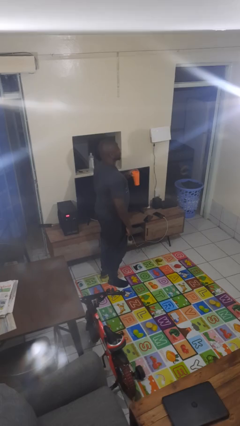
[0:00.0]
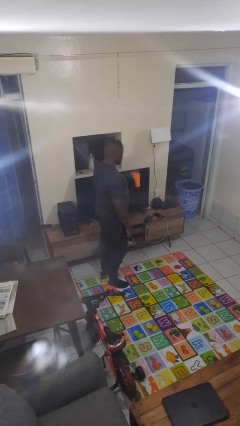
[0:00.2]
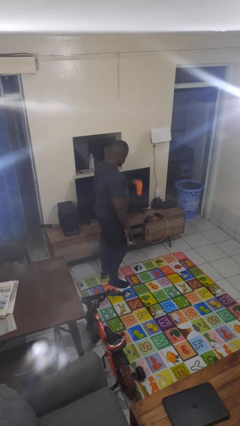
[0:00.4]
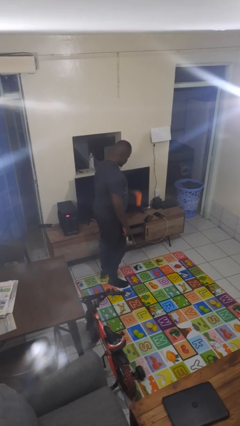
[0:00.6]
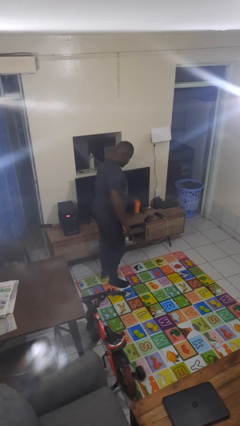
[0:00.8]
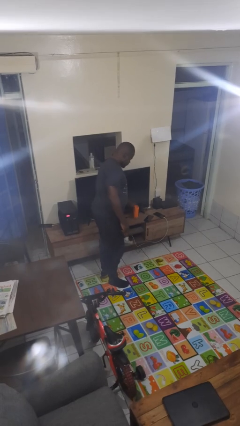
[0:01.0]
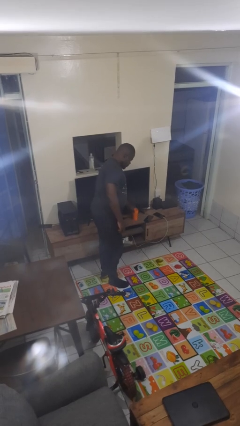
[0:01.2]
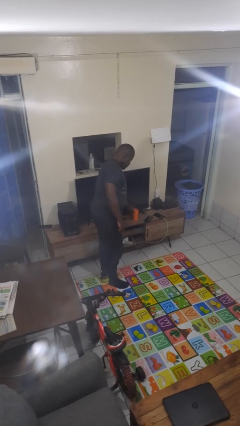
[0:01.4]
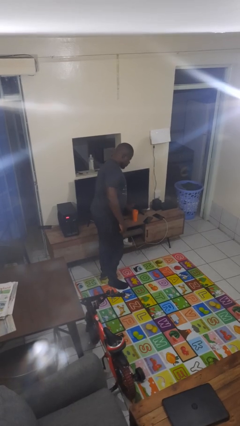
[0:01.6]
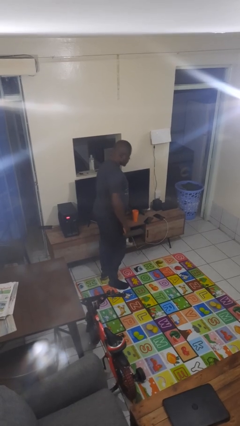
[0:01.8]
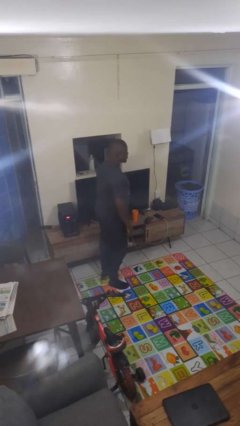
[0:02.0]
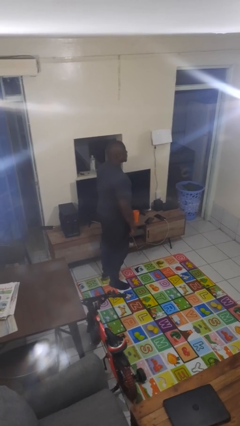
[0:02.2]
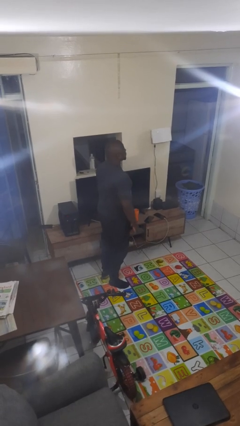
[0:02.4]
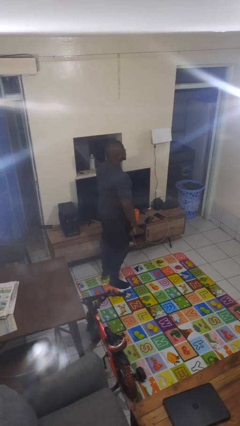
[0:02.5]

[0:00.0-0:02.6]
person puts down object on countertop

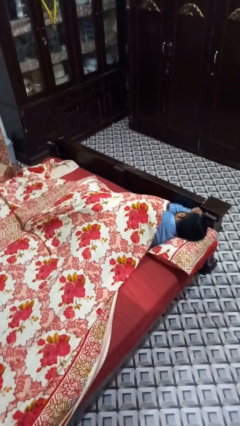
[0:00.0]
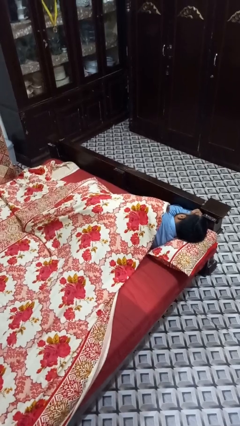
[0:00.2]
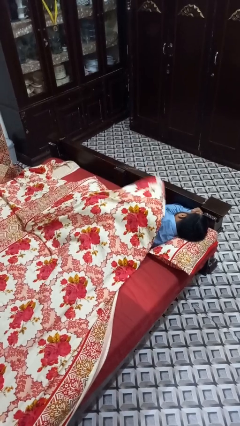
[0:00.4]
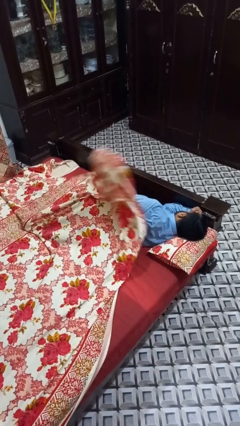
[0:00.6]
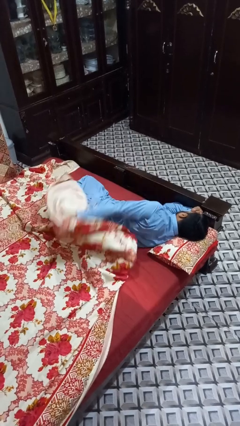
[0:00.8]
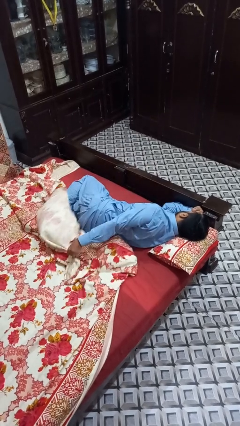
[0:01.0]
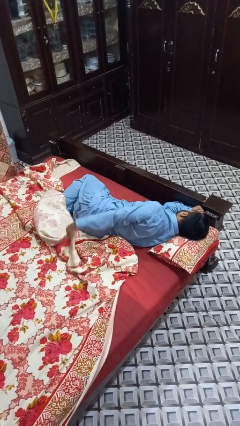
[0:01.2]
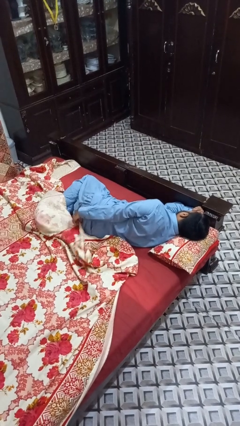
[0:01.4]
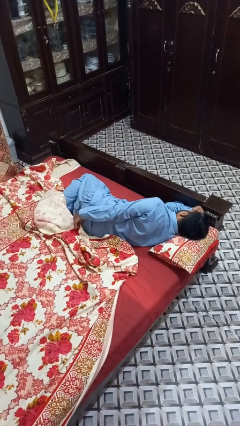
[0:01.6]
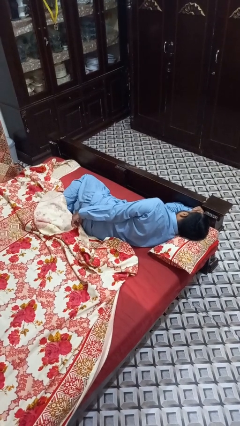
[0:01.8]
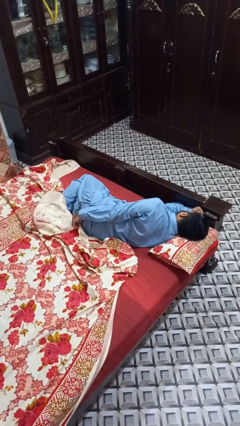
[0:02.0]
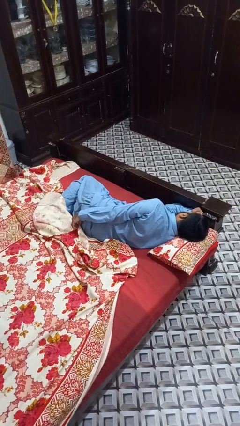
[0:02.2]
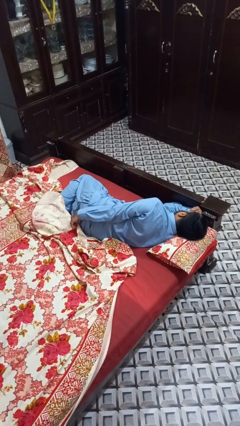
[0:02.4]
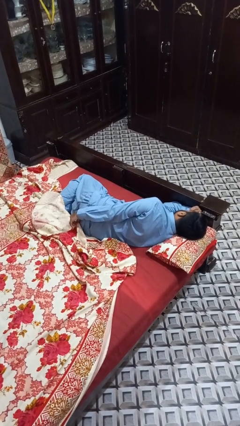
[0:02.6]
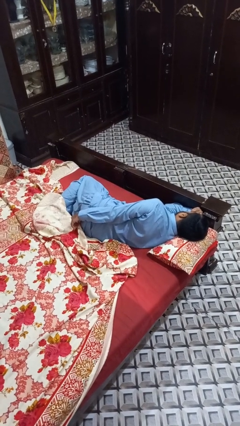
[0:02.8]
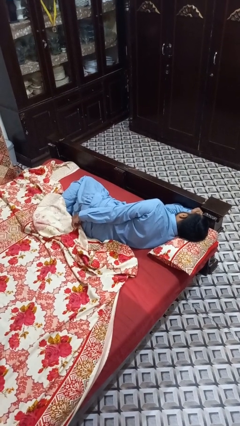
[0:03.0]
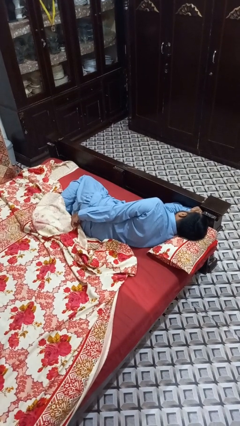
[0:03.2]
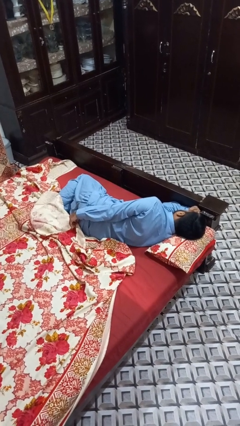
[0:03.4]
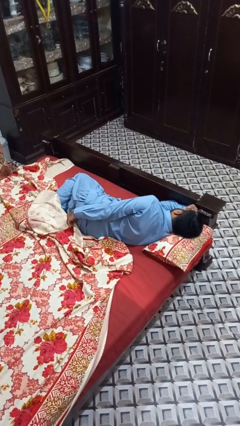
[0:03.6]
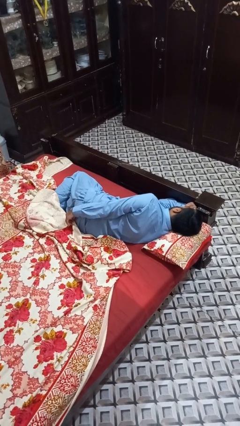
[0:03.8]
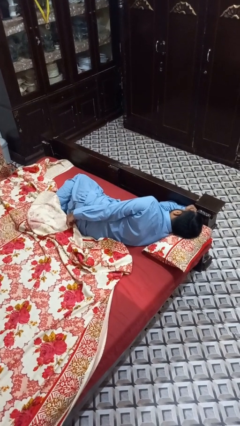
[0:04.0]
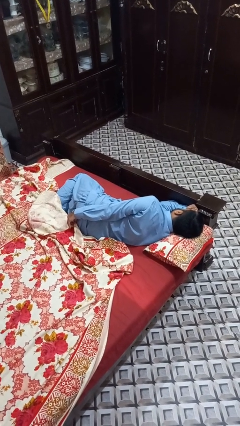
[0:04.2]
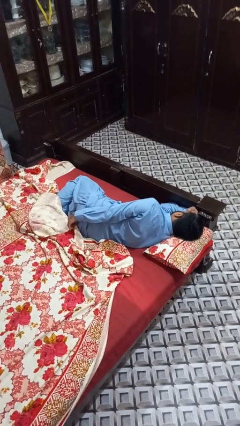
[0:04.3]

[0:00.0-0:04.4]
person uncovers with bedsheets

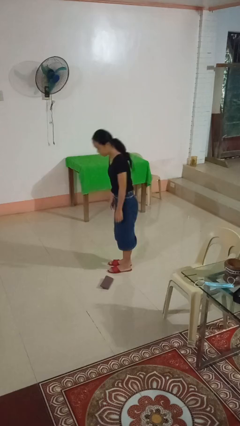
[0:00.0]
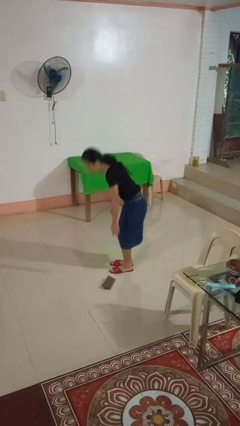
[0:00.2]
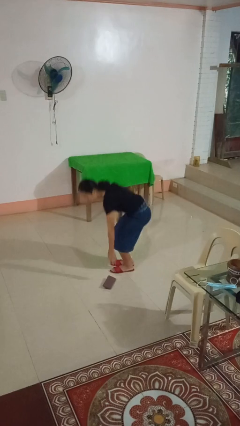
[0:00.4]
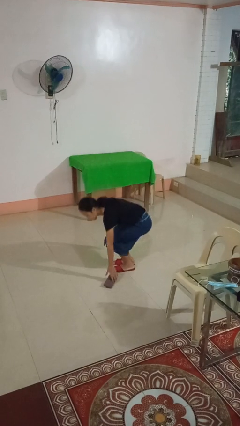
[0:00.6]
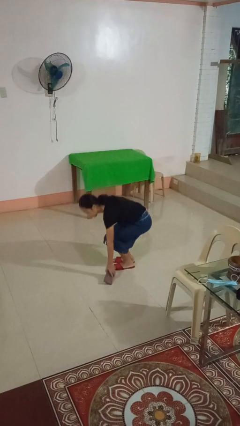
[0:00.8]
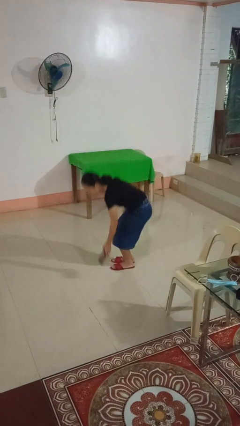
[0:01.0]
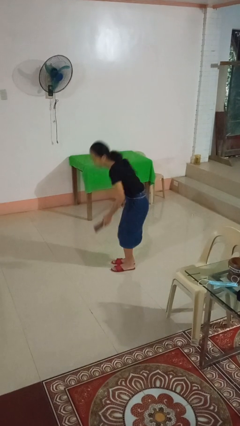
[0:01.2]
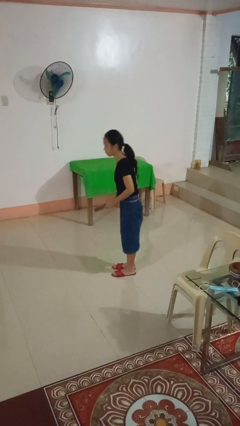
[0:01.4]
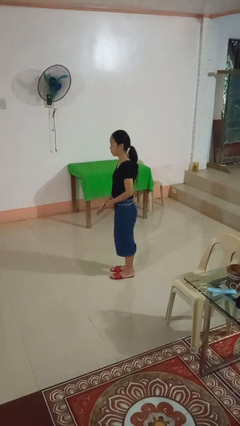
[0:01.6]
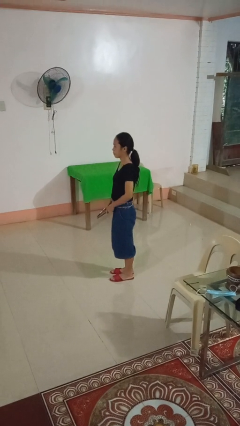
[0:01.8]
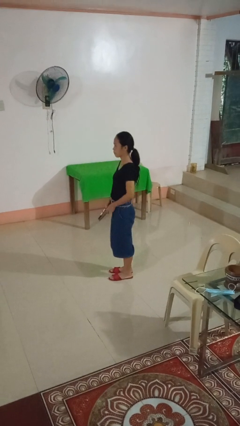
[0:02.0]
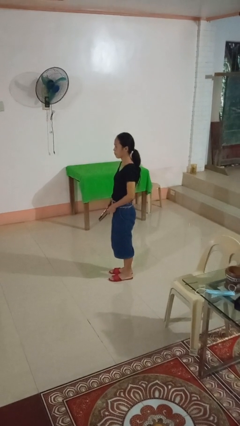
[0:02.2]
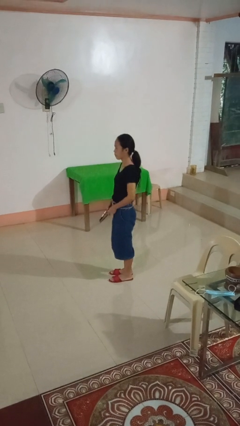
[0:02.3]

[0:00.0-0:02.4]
person picks up object from floor

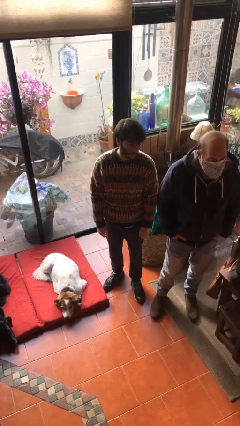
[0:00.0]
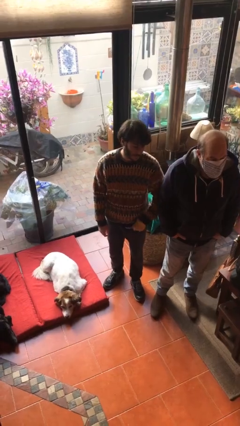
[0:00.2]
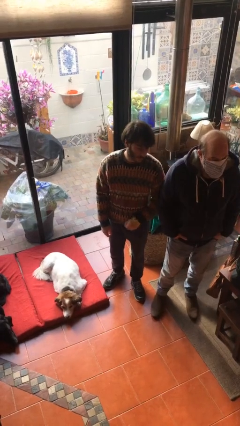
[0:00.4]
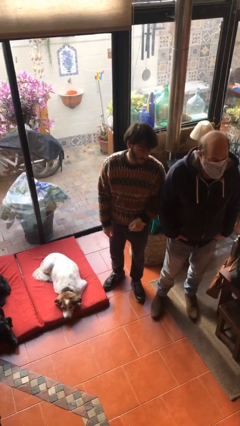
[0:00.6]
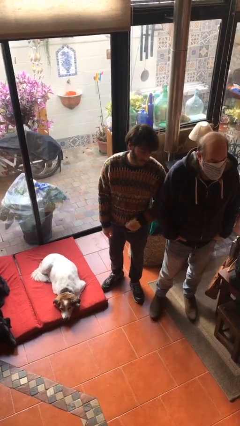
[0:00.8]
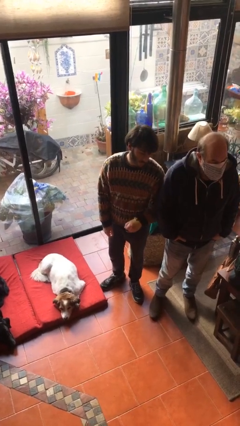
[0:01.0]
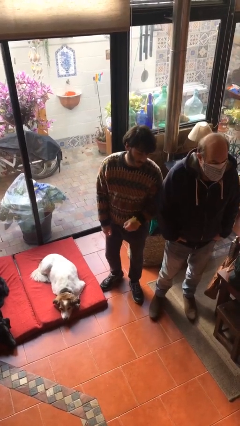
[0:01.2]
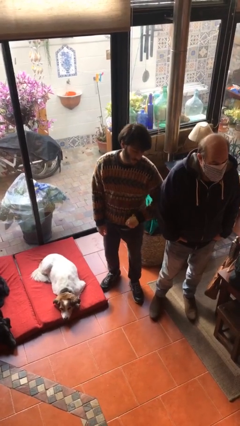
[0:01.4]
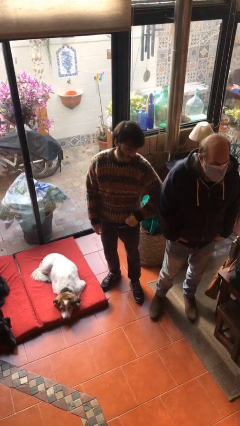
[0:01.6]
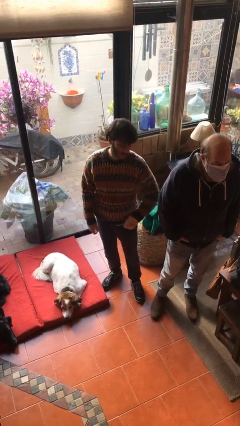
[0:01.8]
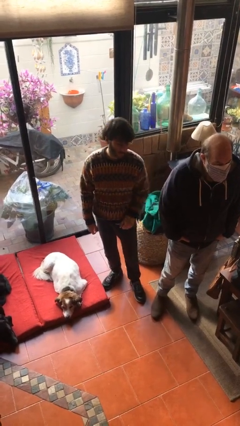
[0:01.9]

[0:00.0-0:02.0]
person nudges person with elbow

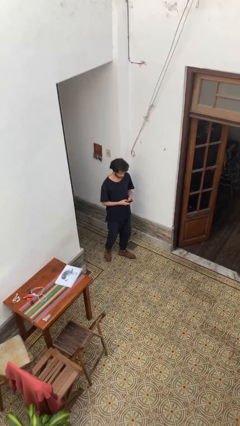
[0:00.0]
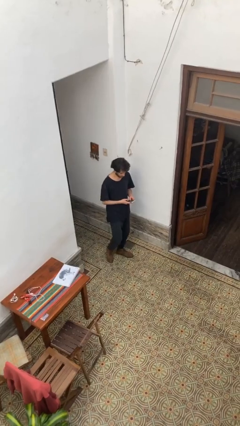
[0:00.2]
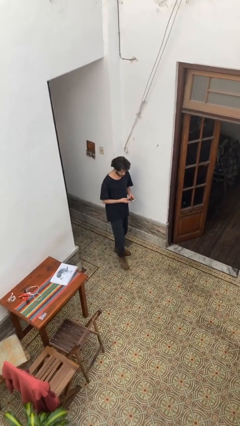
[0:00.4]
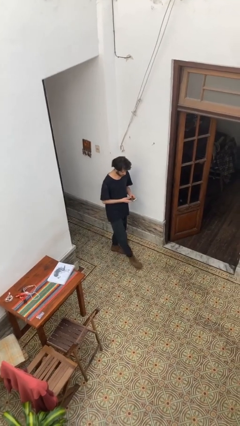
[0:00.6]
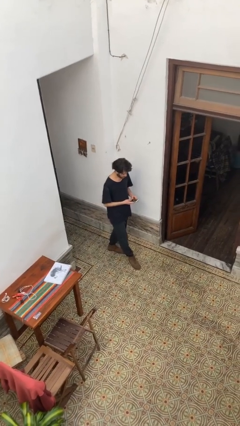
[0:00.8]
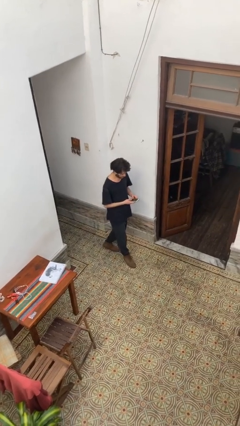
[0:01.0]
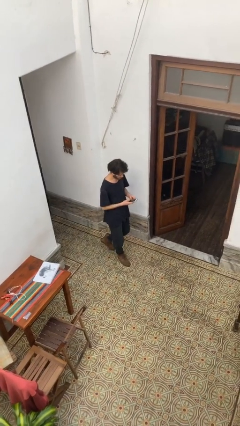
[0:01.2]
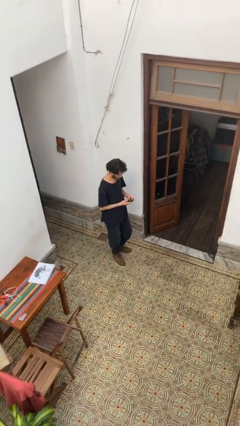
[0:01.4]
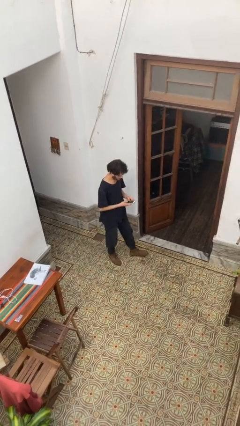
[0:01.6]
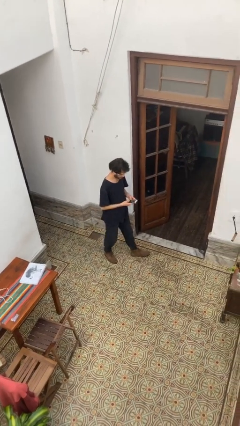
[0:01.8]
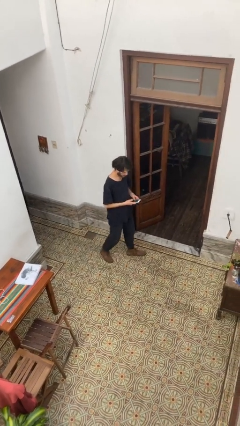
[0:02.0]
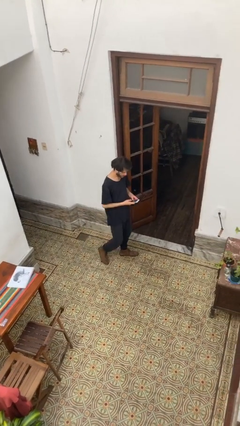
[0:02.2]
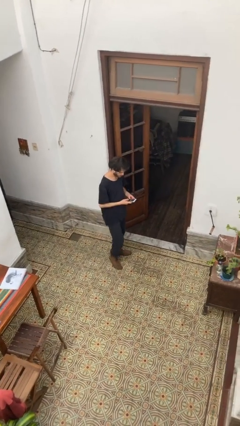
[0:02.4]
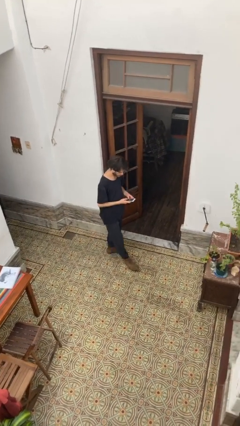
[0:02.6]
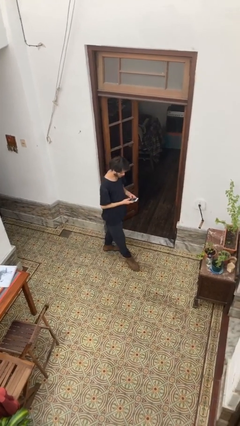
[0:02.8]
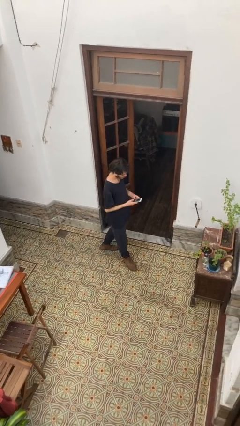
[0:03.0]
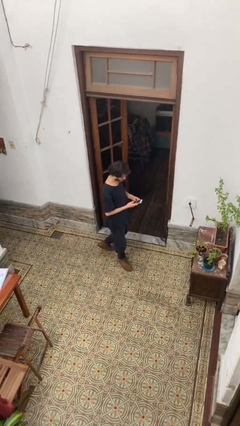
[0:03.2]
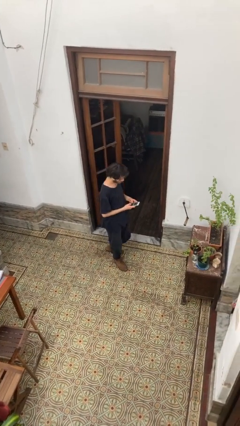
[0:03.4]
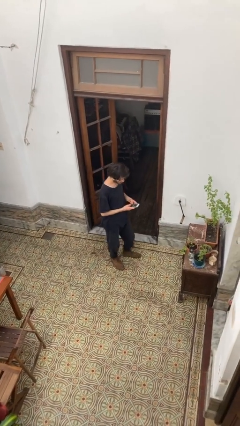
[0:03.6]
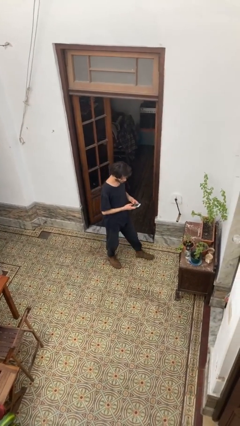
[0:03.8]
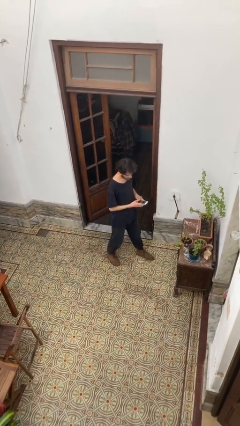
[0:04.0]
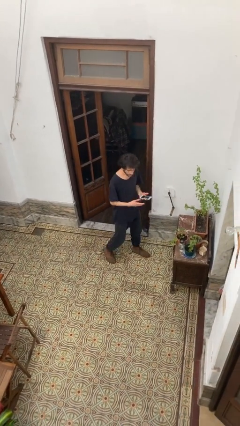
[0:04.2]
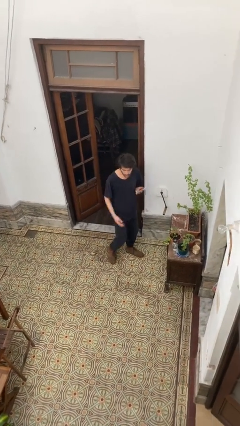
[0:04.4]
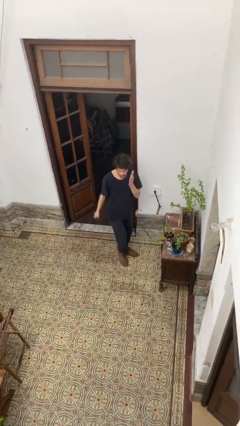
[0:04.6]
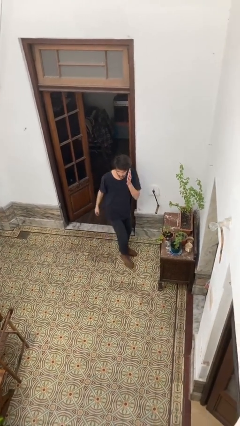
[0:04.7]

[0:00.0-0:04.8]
person texts on phone

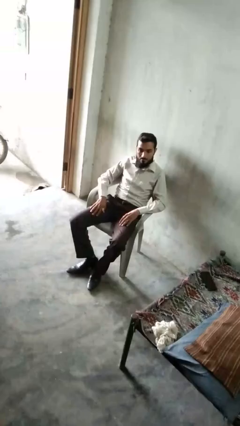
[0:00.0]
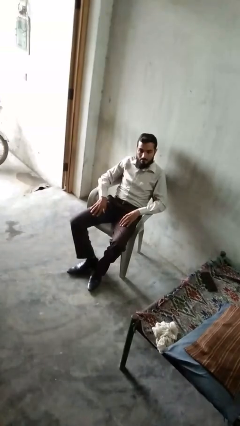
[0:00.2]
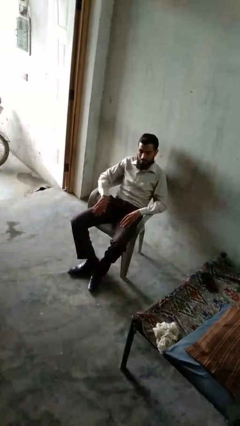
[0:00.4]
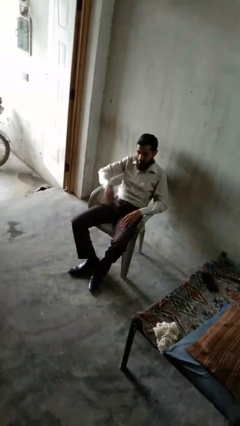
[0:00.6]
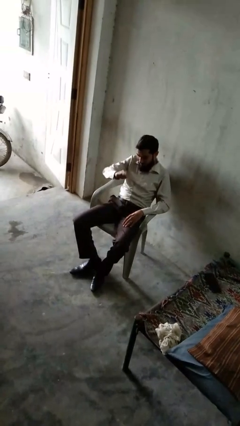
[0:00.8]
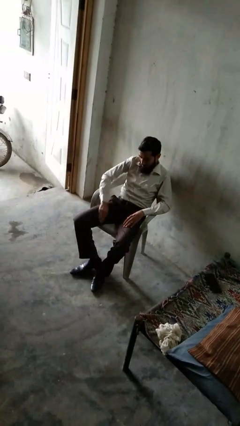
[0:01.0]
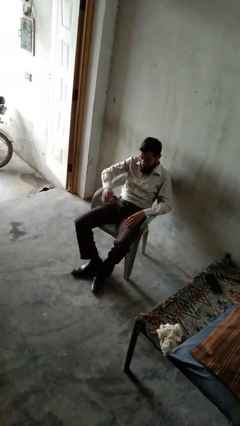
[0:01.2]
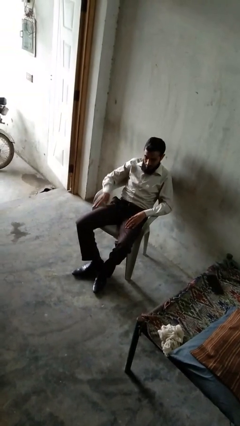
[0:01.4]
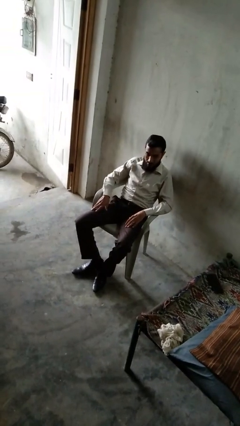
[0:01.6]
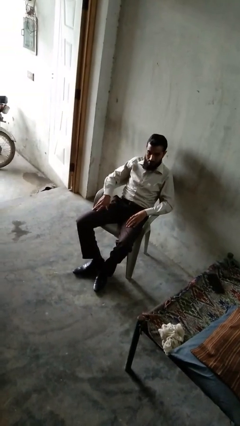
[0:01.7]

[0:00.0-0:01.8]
person slaps hands on thighs
